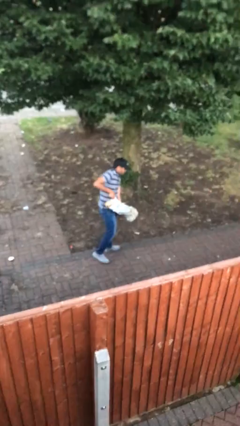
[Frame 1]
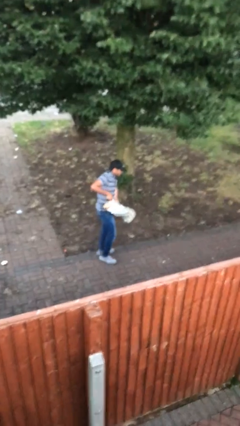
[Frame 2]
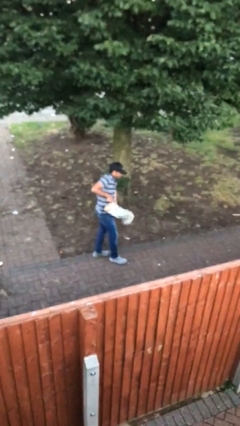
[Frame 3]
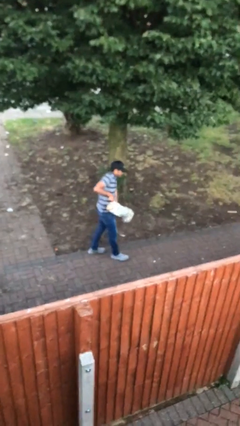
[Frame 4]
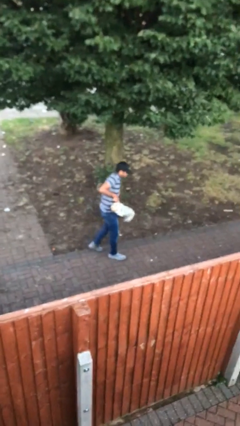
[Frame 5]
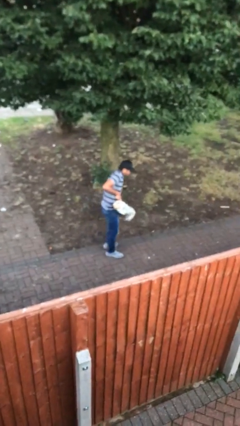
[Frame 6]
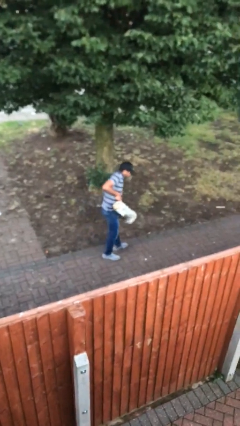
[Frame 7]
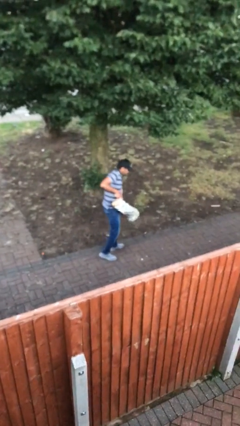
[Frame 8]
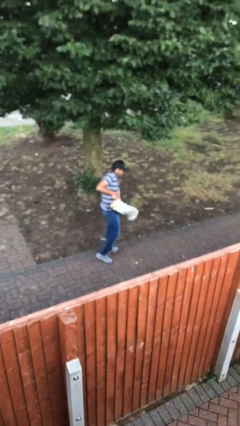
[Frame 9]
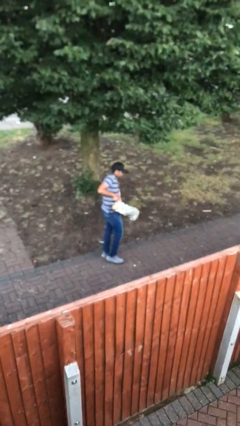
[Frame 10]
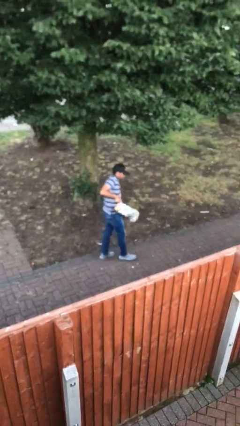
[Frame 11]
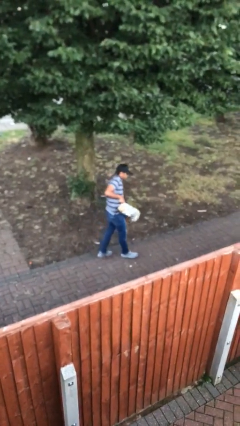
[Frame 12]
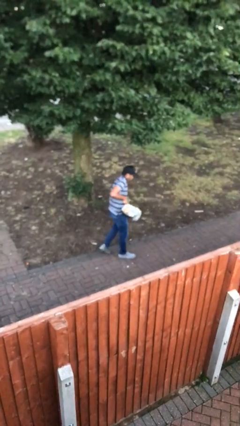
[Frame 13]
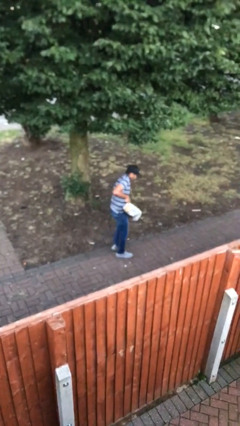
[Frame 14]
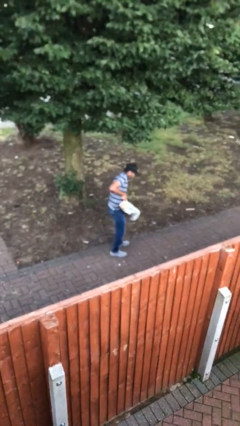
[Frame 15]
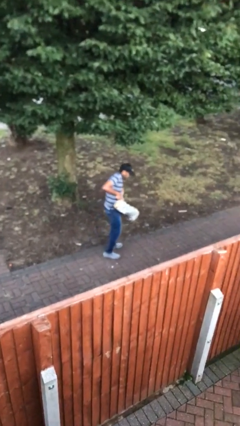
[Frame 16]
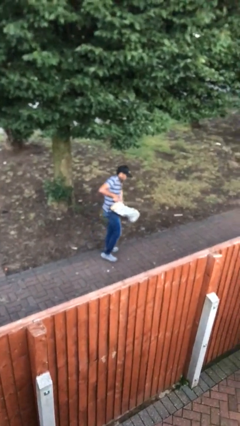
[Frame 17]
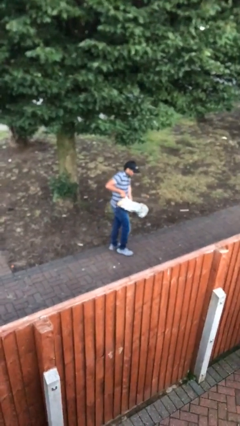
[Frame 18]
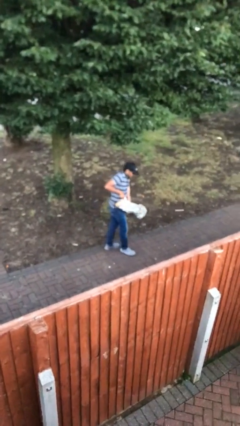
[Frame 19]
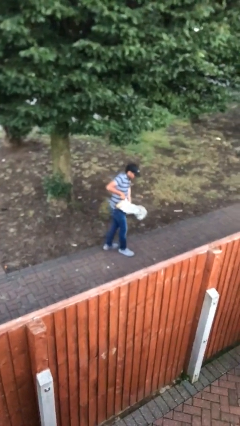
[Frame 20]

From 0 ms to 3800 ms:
person carries heavy object

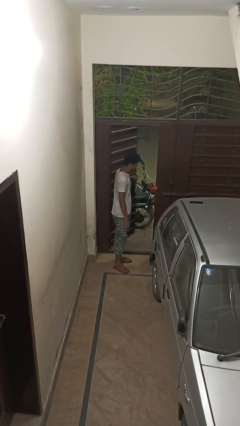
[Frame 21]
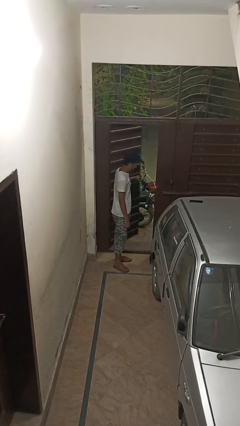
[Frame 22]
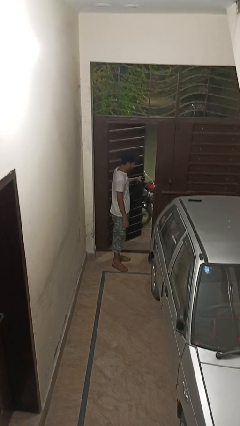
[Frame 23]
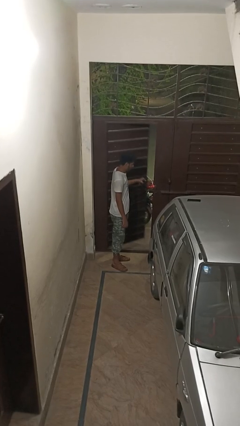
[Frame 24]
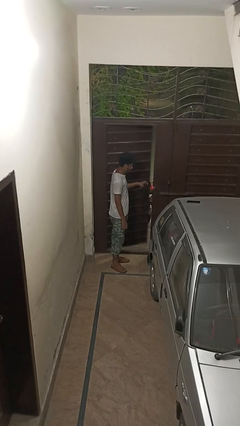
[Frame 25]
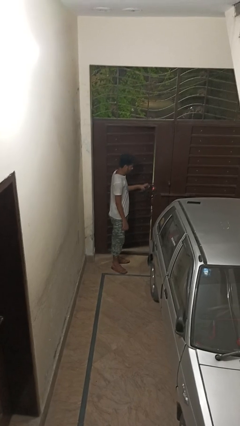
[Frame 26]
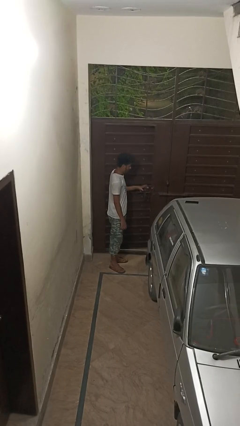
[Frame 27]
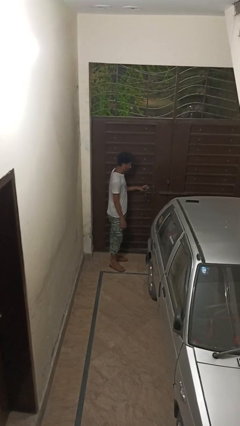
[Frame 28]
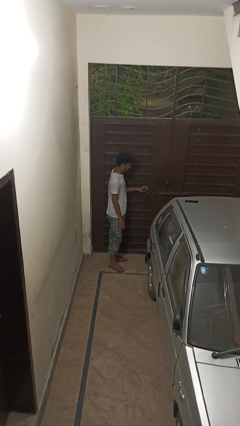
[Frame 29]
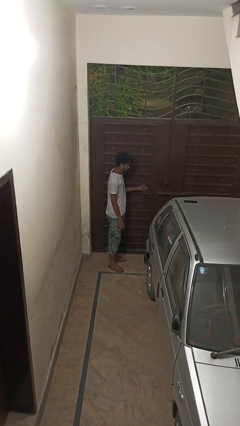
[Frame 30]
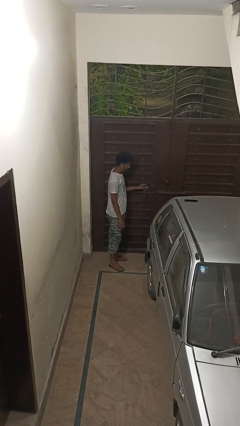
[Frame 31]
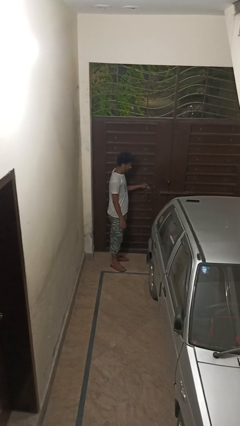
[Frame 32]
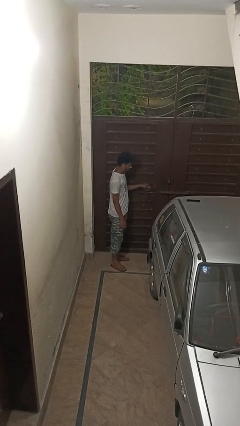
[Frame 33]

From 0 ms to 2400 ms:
person closes gate

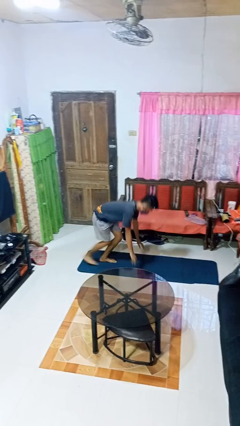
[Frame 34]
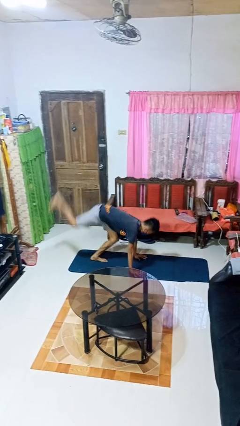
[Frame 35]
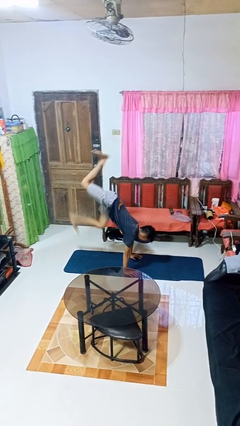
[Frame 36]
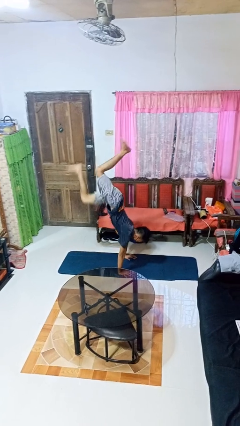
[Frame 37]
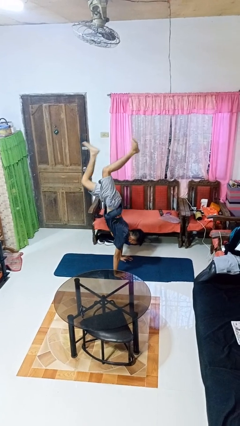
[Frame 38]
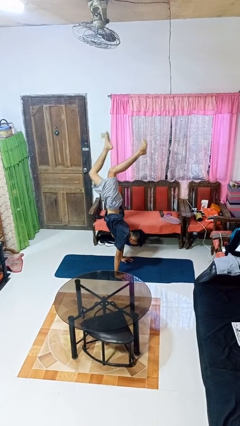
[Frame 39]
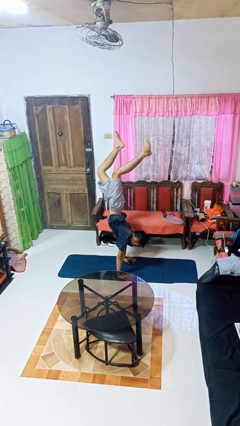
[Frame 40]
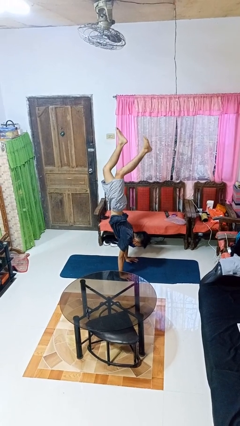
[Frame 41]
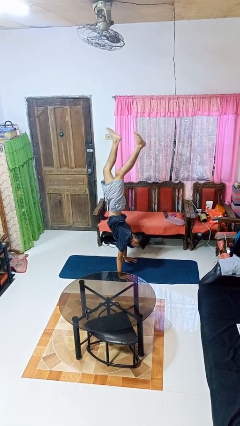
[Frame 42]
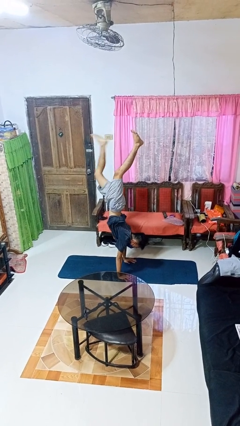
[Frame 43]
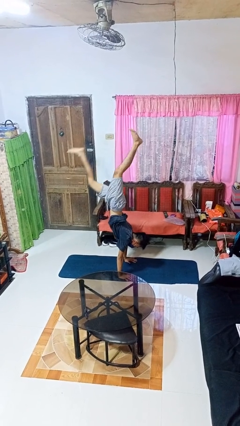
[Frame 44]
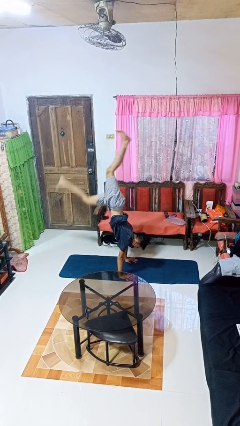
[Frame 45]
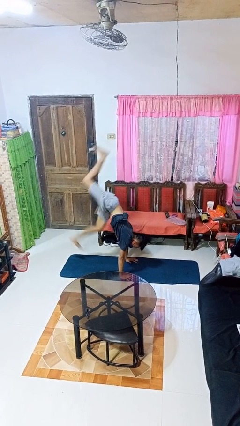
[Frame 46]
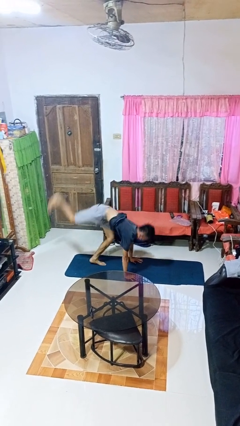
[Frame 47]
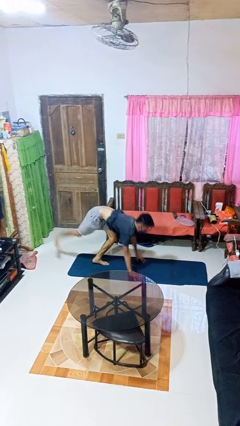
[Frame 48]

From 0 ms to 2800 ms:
person handstand

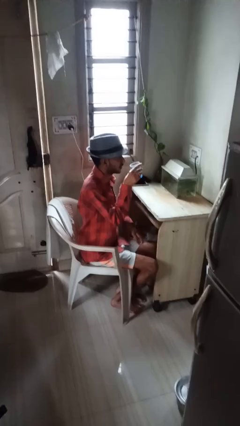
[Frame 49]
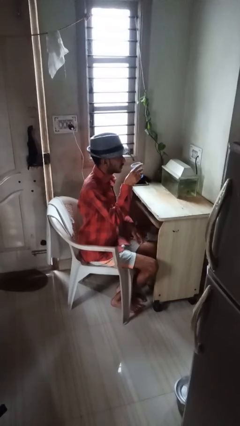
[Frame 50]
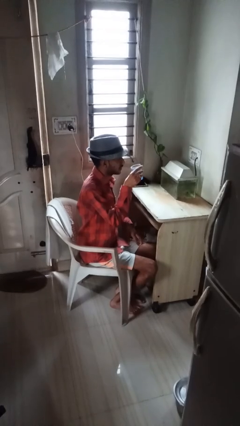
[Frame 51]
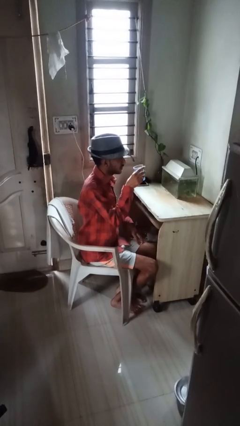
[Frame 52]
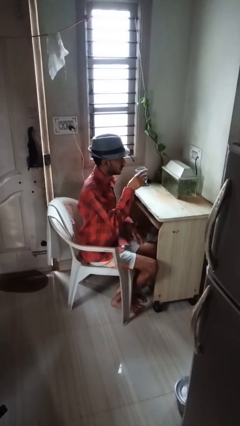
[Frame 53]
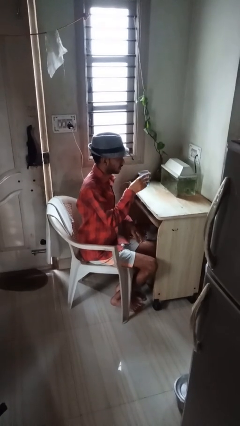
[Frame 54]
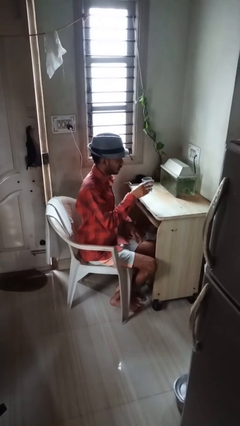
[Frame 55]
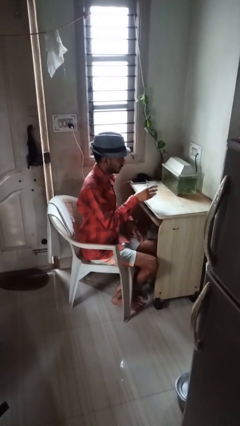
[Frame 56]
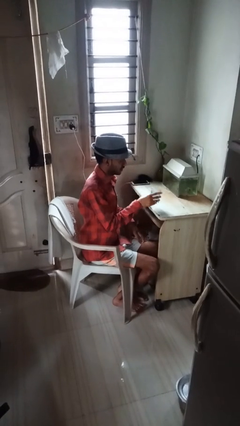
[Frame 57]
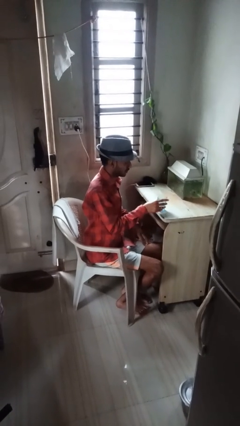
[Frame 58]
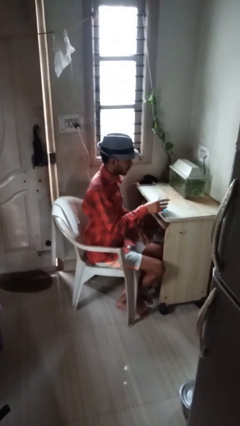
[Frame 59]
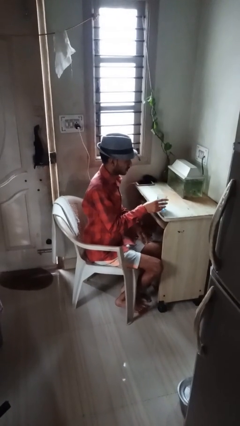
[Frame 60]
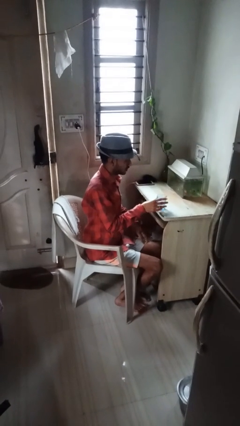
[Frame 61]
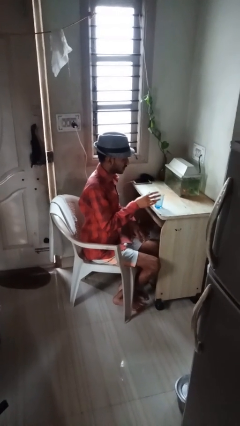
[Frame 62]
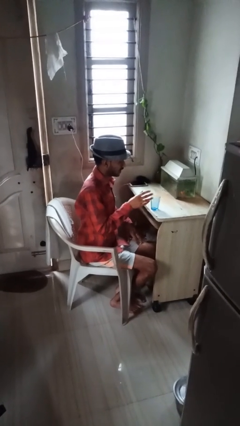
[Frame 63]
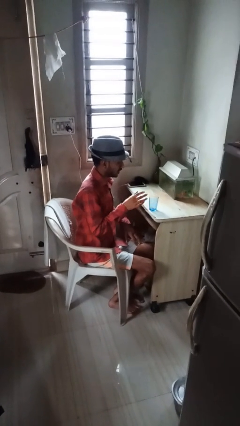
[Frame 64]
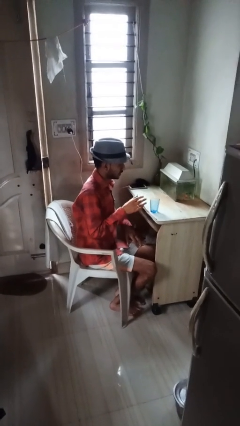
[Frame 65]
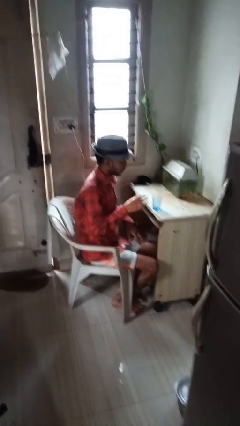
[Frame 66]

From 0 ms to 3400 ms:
person puts down object on table

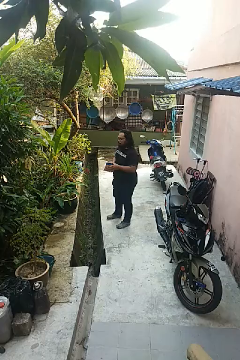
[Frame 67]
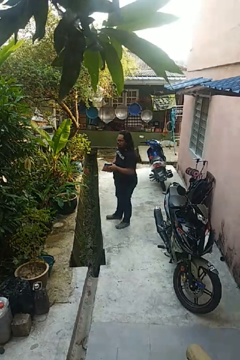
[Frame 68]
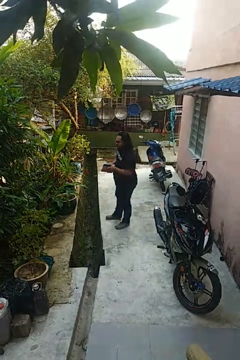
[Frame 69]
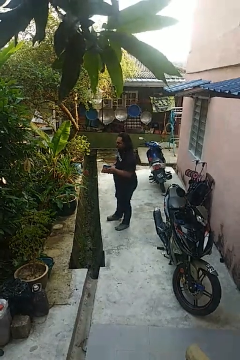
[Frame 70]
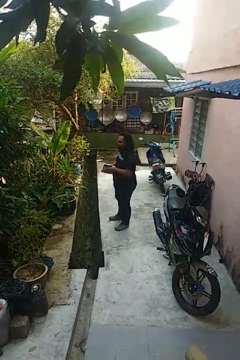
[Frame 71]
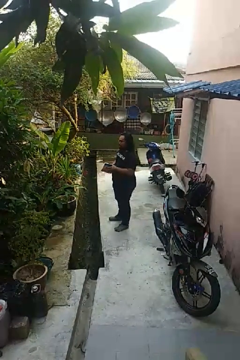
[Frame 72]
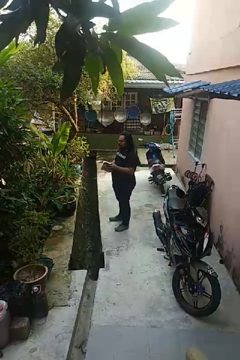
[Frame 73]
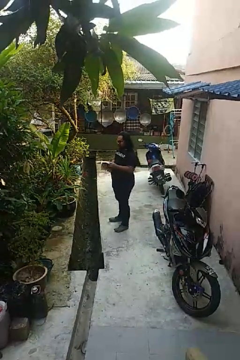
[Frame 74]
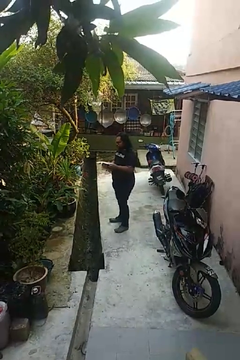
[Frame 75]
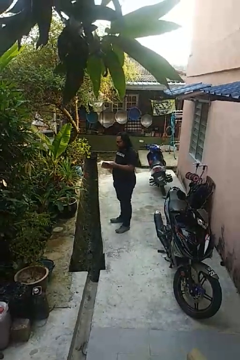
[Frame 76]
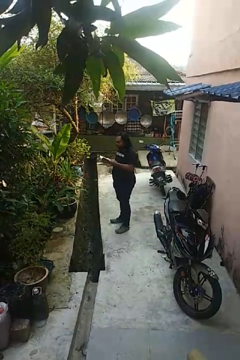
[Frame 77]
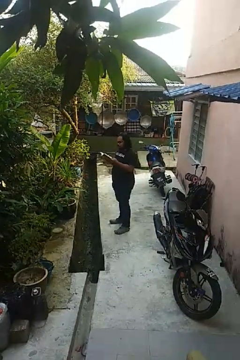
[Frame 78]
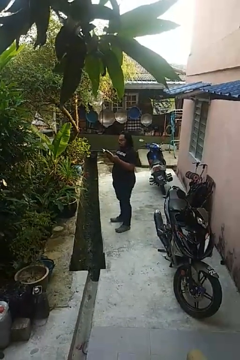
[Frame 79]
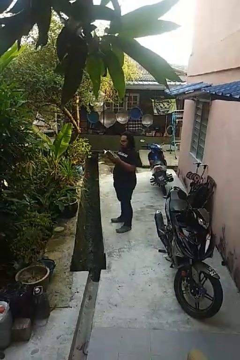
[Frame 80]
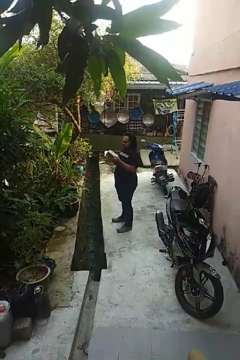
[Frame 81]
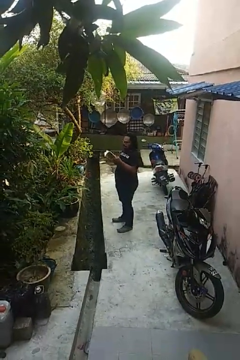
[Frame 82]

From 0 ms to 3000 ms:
person reads book

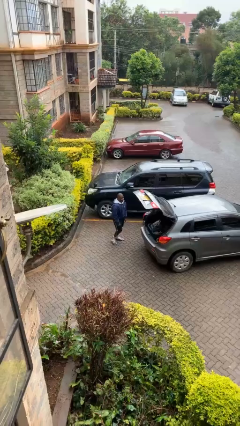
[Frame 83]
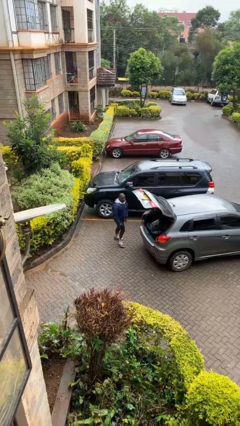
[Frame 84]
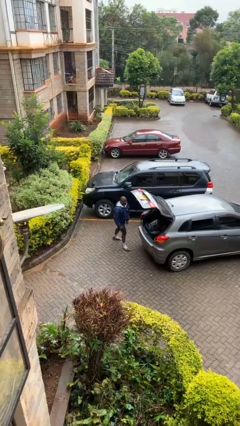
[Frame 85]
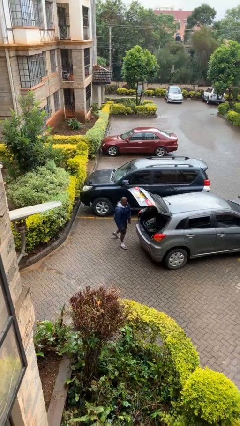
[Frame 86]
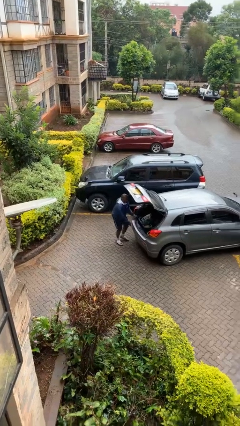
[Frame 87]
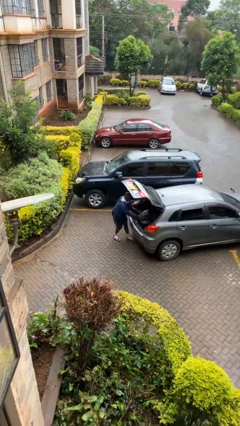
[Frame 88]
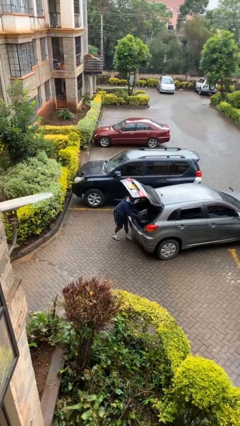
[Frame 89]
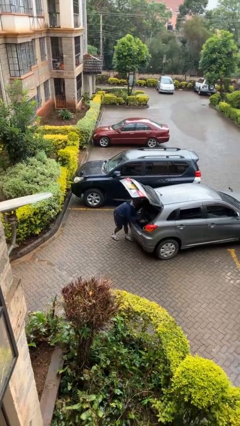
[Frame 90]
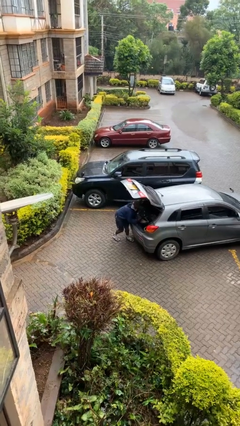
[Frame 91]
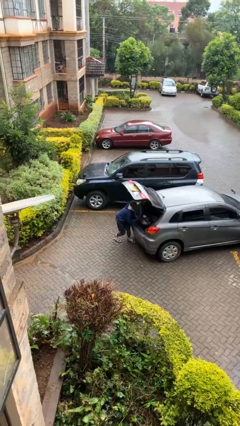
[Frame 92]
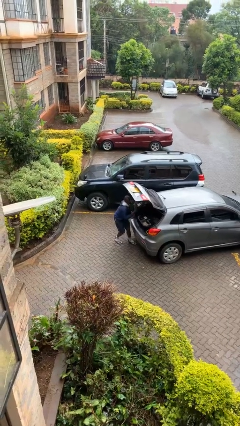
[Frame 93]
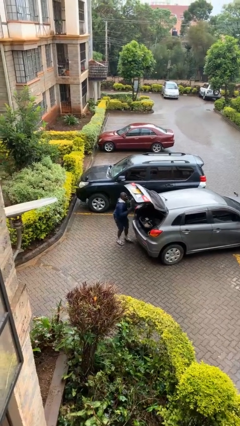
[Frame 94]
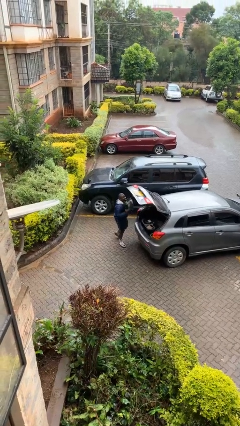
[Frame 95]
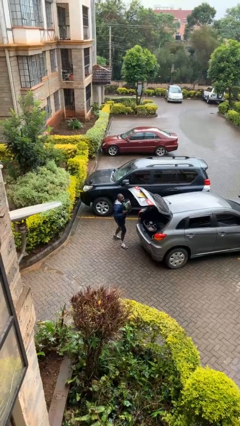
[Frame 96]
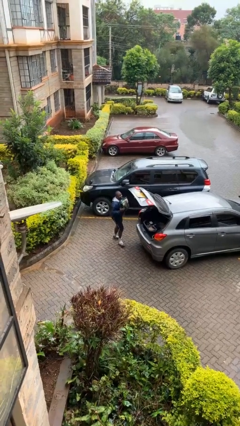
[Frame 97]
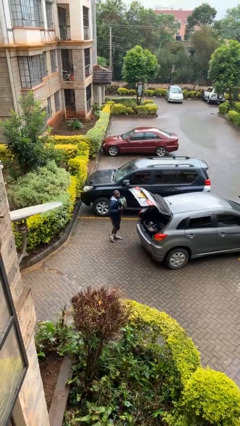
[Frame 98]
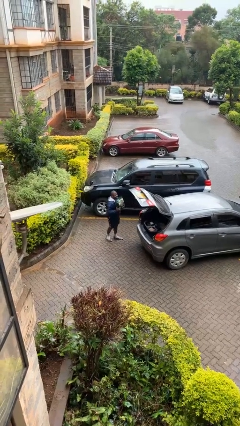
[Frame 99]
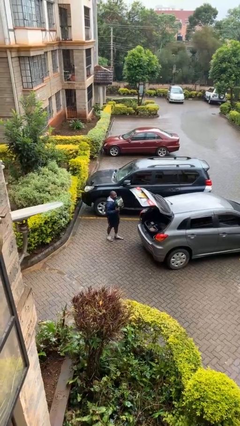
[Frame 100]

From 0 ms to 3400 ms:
person unloads car
